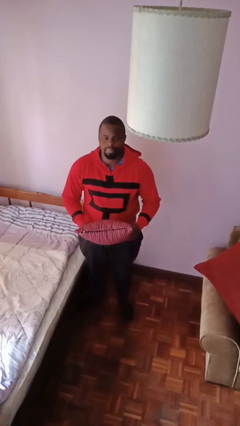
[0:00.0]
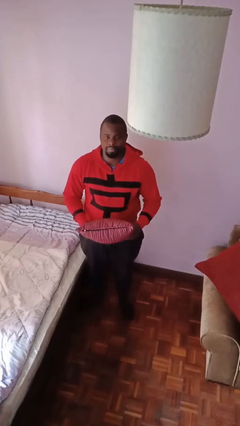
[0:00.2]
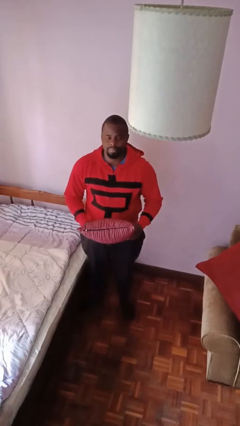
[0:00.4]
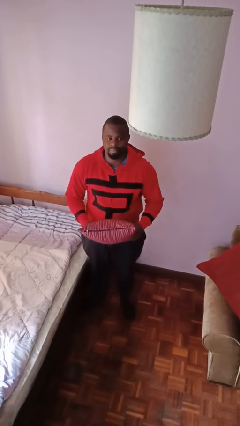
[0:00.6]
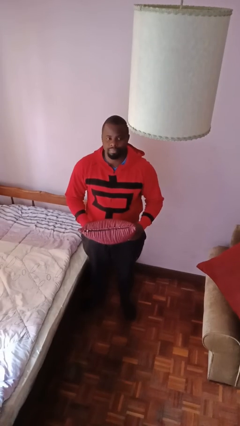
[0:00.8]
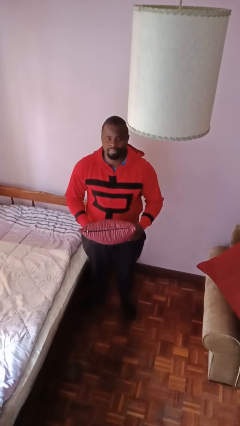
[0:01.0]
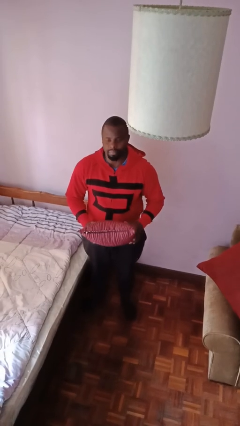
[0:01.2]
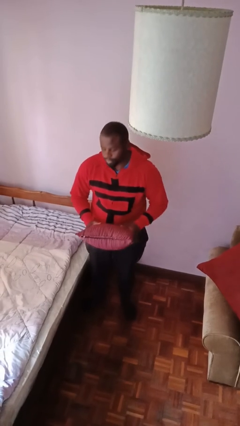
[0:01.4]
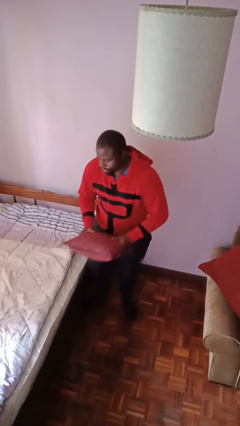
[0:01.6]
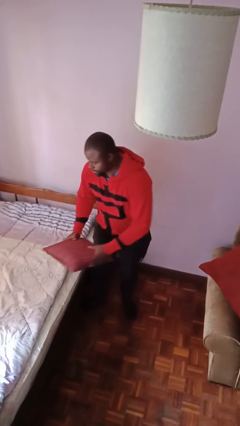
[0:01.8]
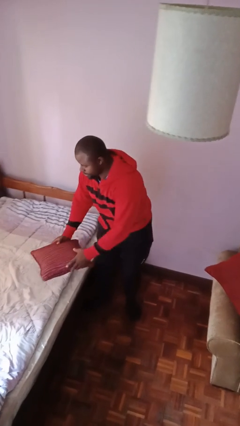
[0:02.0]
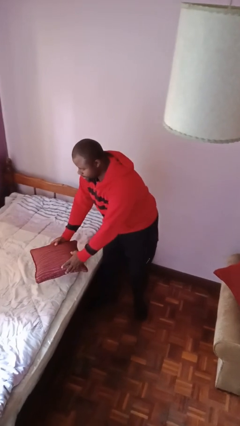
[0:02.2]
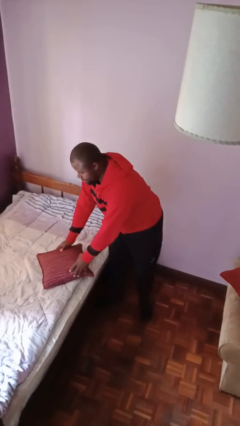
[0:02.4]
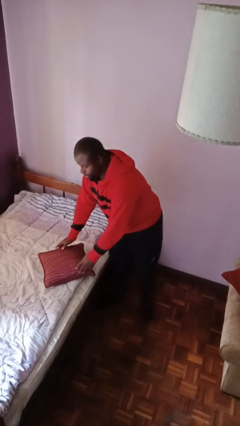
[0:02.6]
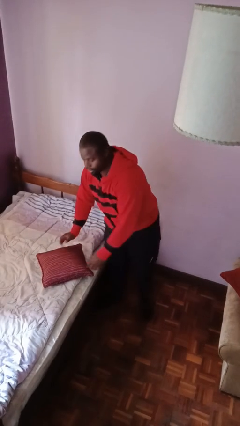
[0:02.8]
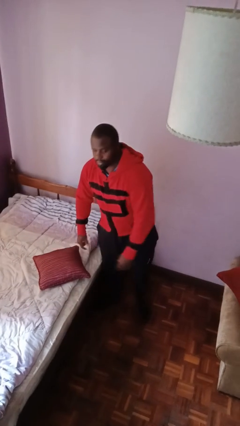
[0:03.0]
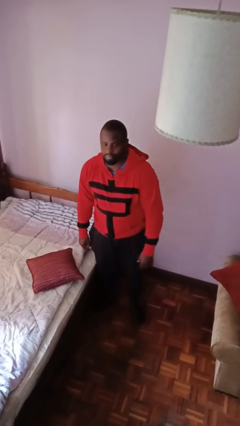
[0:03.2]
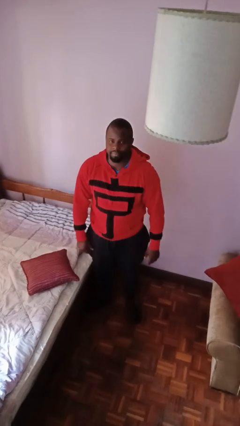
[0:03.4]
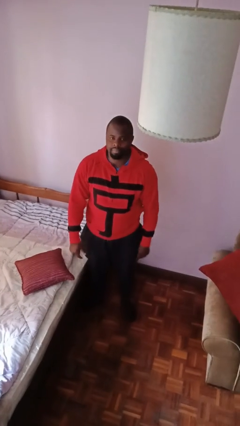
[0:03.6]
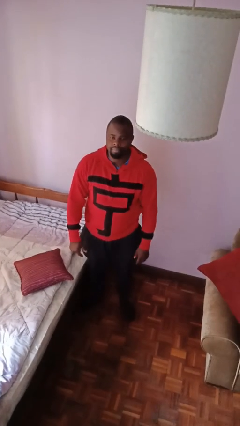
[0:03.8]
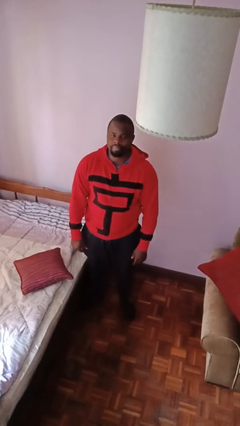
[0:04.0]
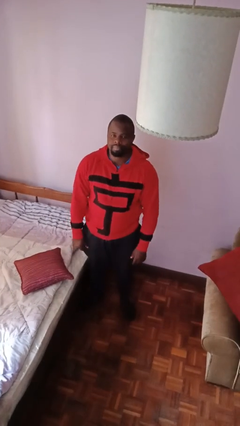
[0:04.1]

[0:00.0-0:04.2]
person puts down object on bed

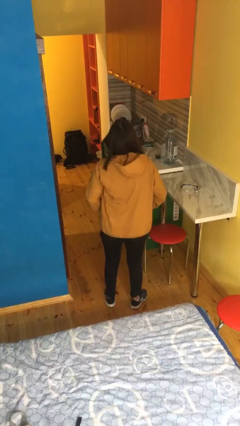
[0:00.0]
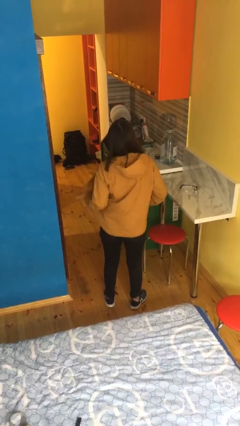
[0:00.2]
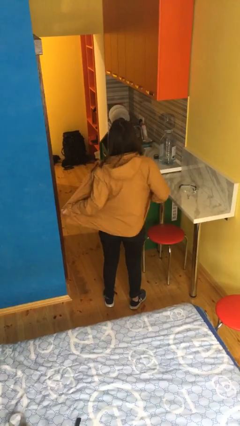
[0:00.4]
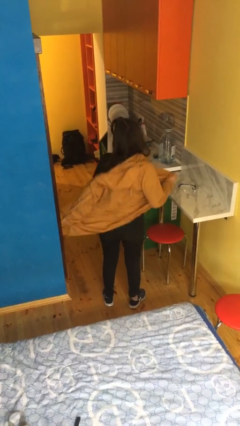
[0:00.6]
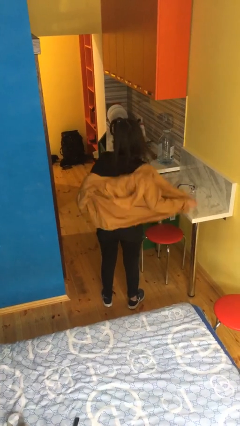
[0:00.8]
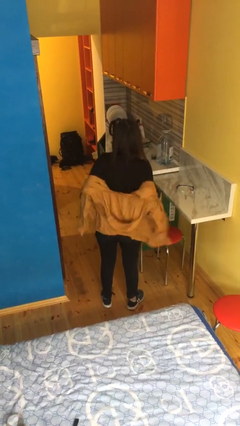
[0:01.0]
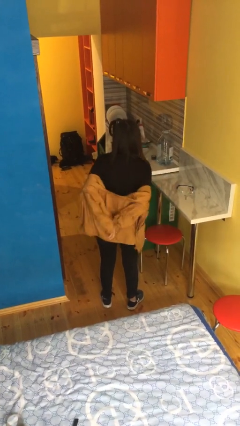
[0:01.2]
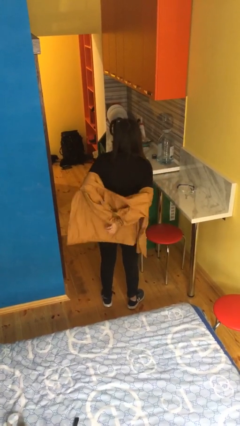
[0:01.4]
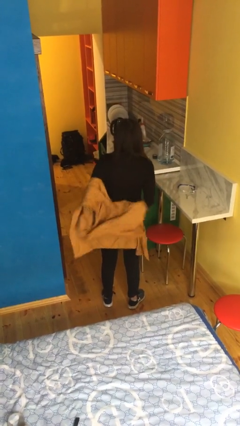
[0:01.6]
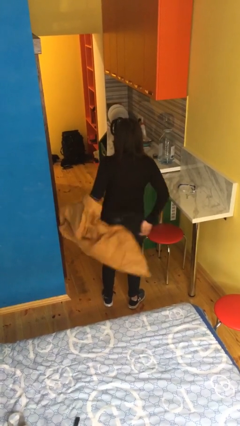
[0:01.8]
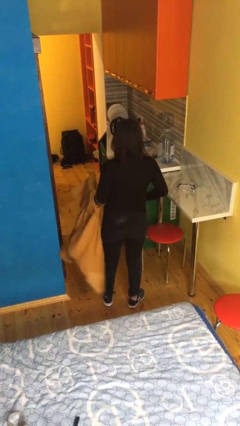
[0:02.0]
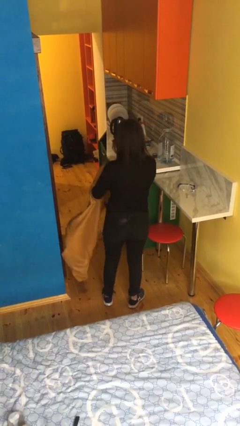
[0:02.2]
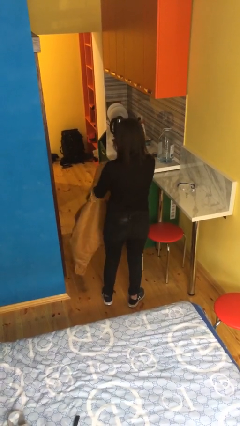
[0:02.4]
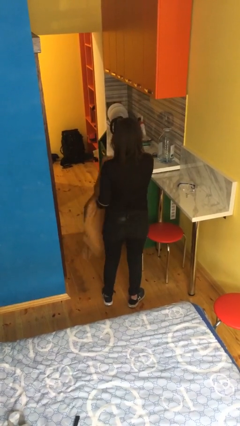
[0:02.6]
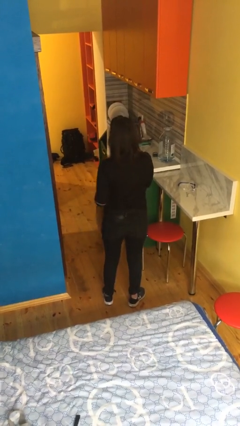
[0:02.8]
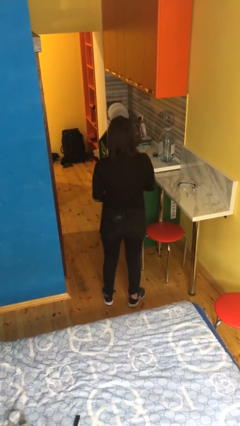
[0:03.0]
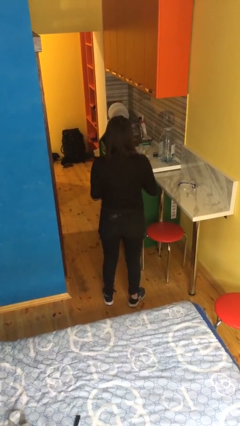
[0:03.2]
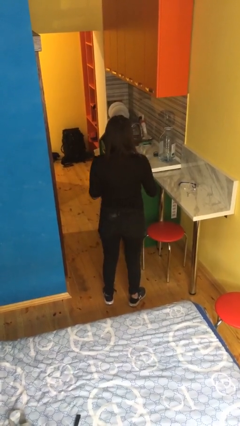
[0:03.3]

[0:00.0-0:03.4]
person takes off jacket

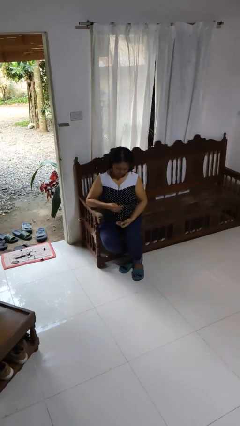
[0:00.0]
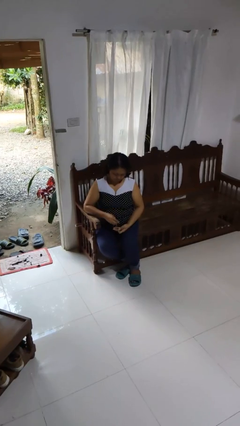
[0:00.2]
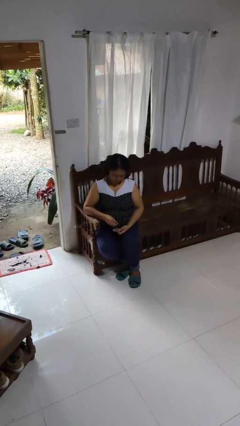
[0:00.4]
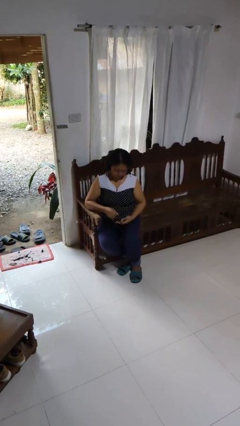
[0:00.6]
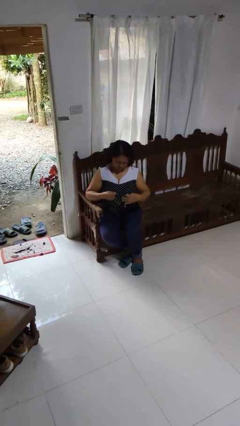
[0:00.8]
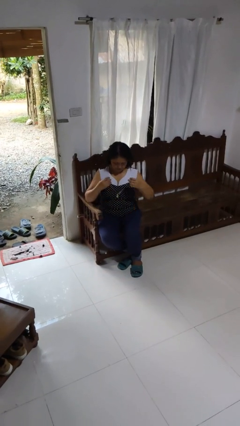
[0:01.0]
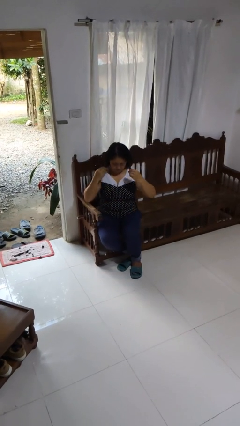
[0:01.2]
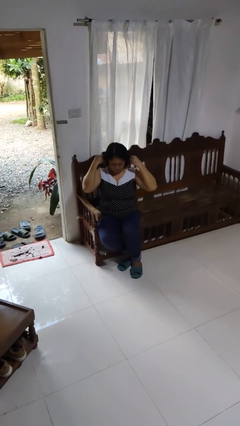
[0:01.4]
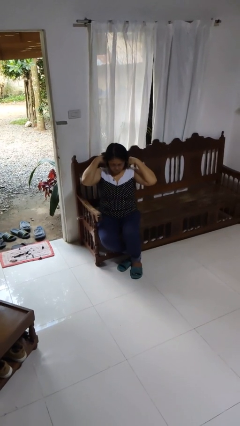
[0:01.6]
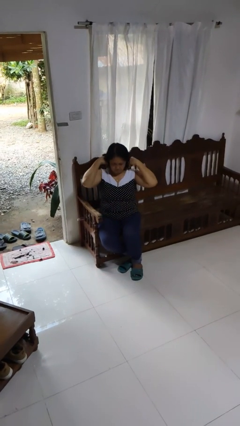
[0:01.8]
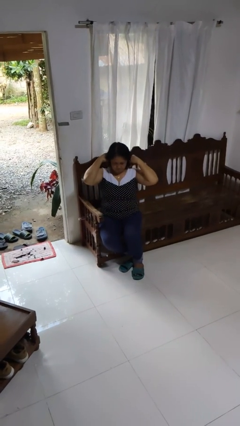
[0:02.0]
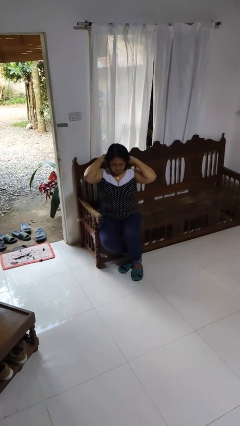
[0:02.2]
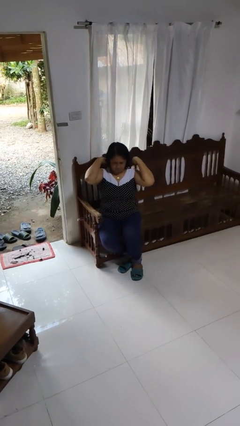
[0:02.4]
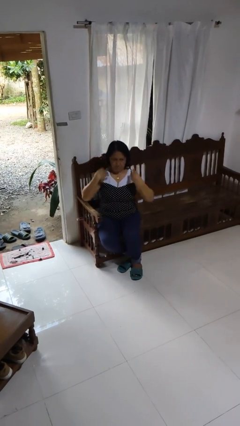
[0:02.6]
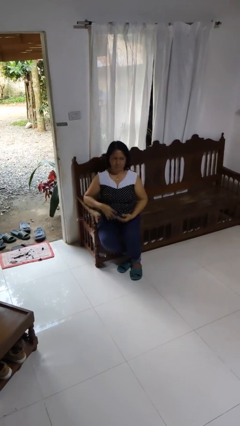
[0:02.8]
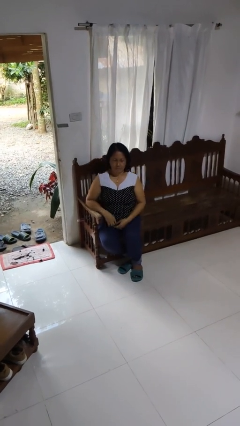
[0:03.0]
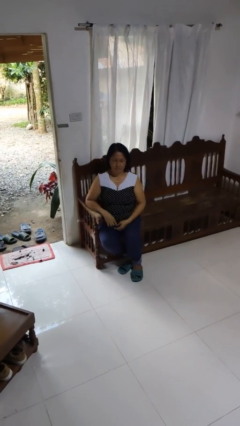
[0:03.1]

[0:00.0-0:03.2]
person puts on necklace

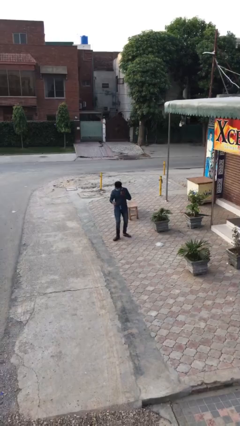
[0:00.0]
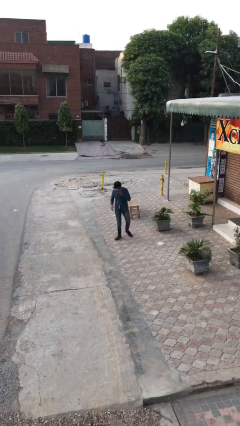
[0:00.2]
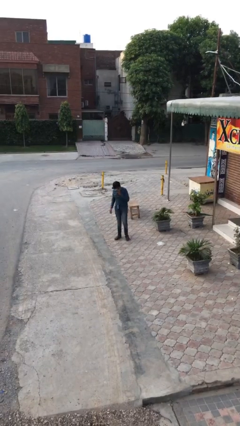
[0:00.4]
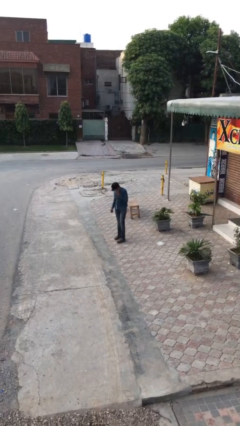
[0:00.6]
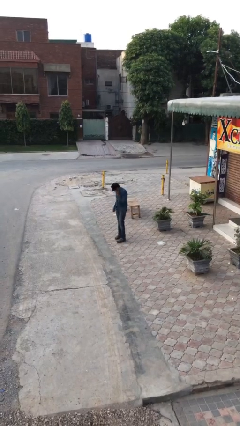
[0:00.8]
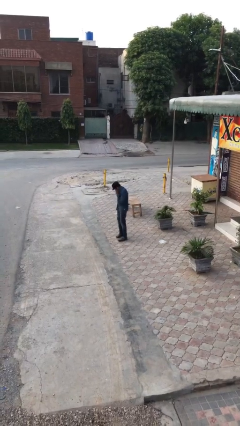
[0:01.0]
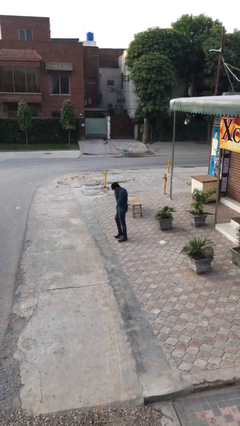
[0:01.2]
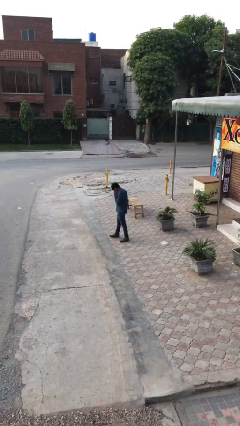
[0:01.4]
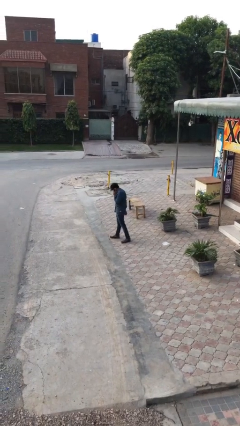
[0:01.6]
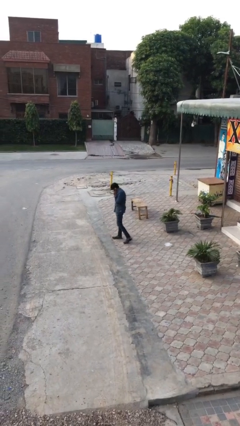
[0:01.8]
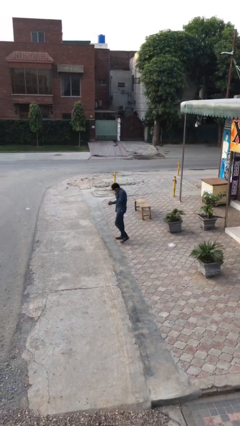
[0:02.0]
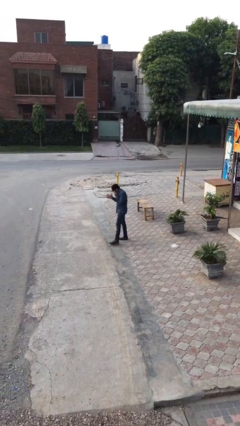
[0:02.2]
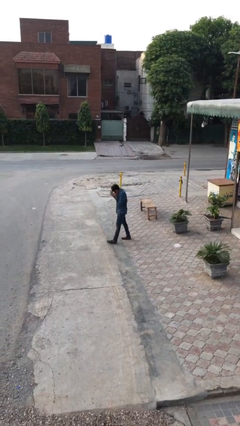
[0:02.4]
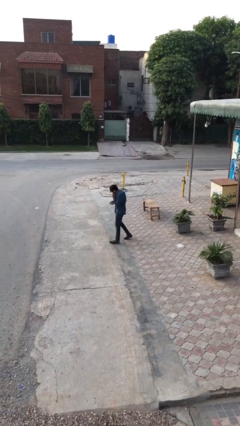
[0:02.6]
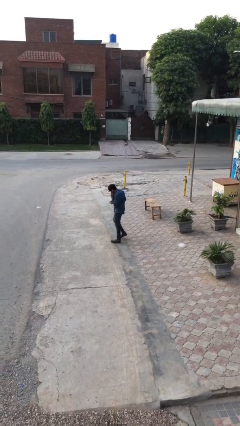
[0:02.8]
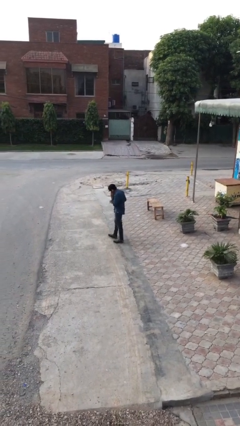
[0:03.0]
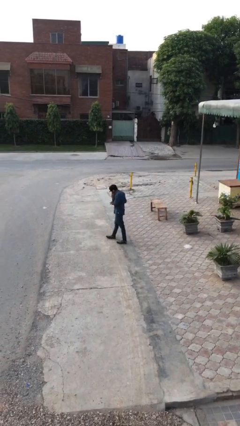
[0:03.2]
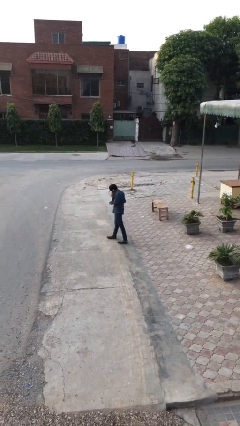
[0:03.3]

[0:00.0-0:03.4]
person talks on phone

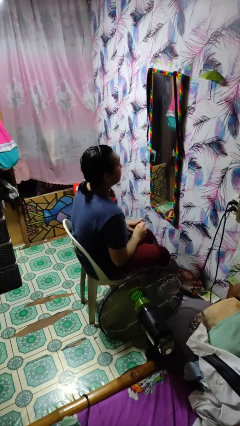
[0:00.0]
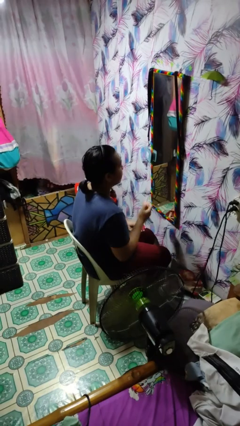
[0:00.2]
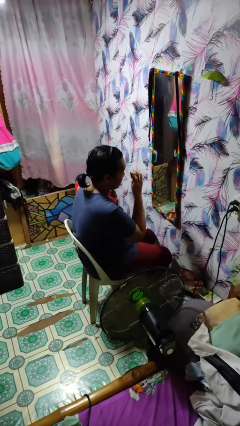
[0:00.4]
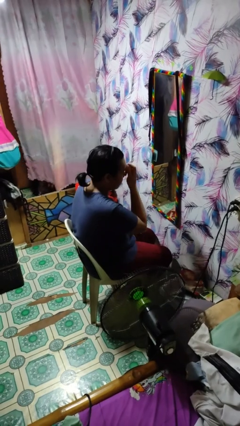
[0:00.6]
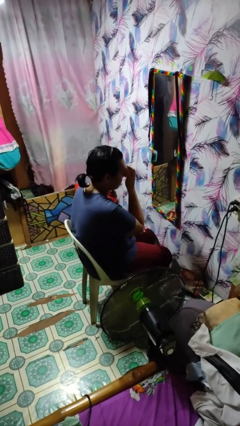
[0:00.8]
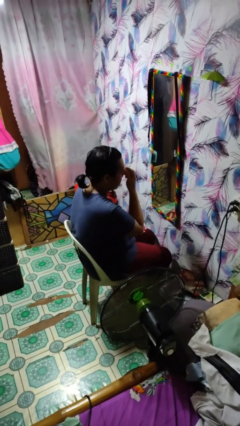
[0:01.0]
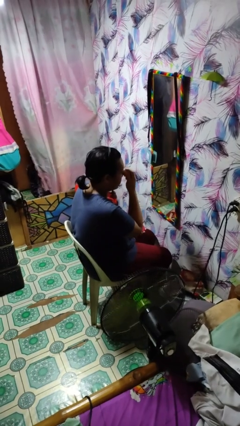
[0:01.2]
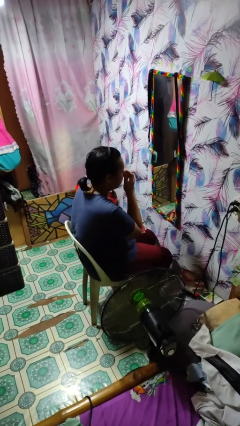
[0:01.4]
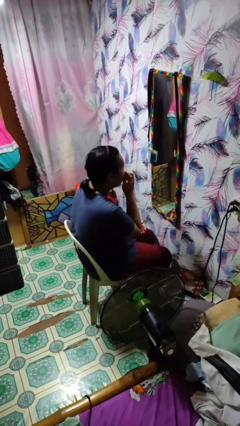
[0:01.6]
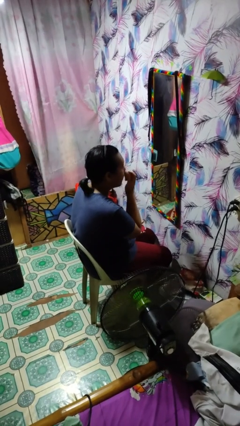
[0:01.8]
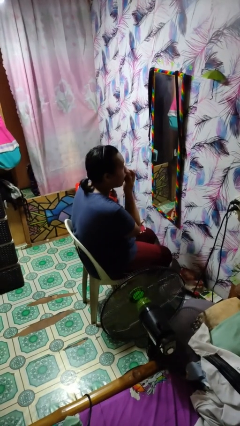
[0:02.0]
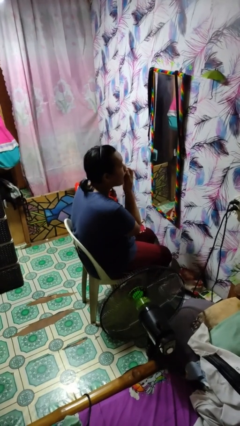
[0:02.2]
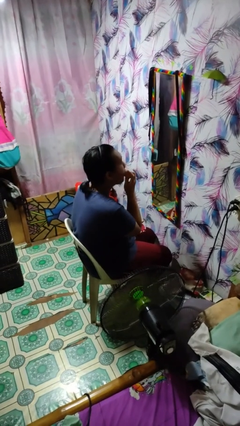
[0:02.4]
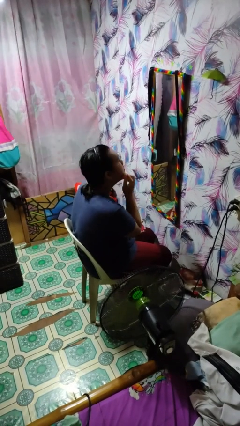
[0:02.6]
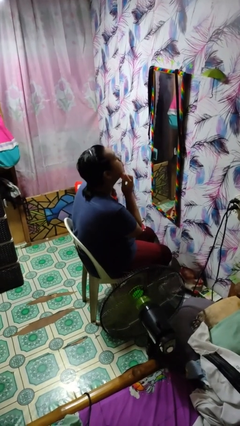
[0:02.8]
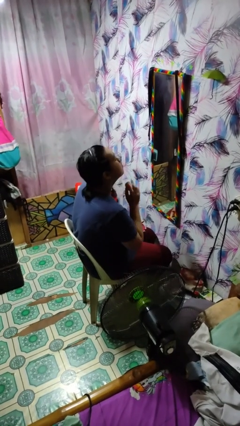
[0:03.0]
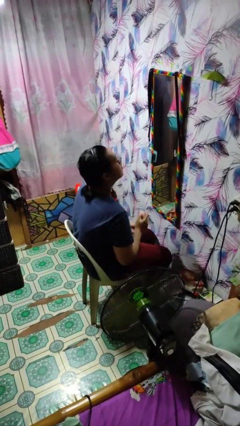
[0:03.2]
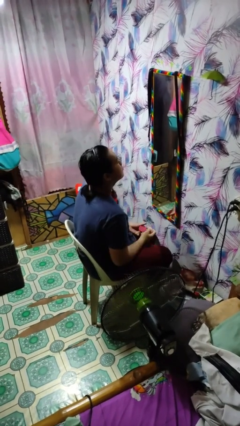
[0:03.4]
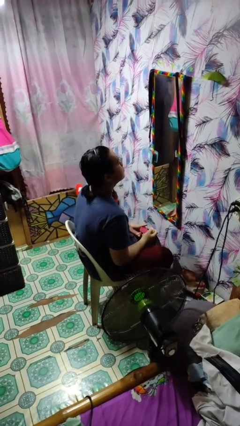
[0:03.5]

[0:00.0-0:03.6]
person applies foundation makeup
